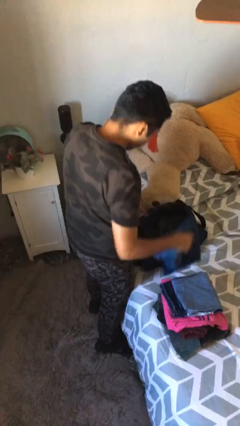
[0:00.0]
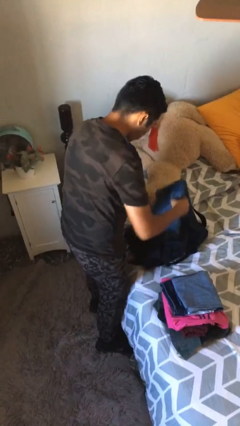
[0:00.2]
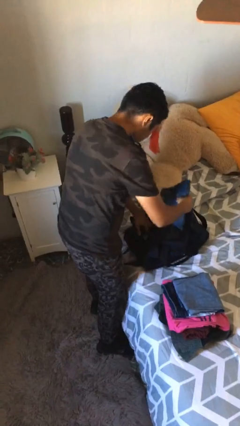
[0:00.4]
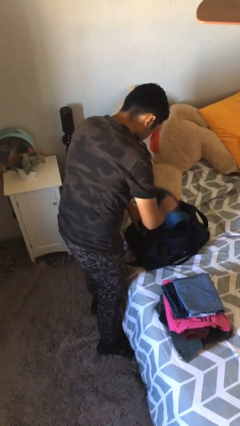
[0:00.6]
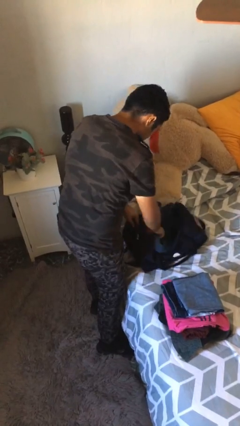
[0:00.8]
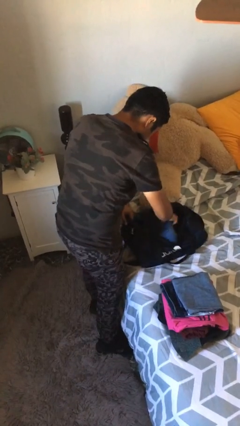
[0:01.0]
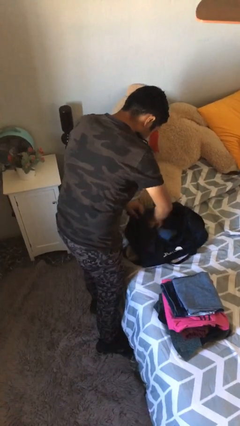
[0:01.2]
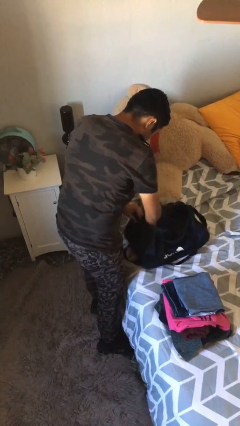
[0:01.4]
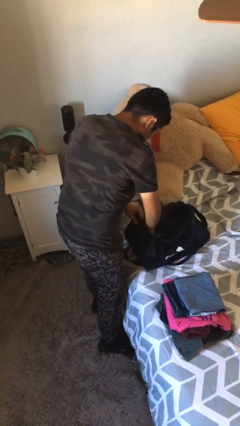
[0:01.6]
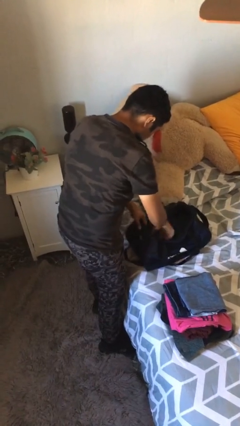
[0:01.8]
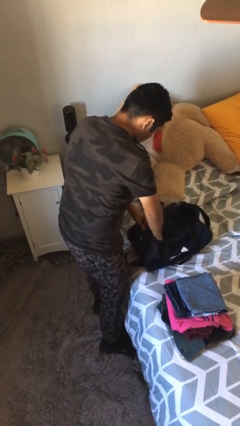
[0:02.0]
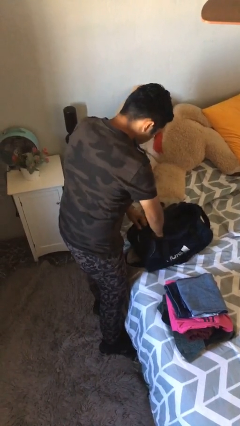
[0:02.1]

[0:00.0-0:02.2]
person loads clothes into suitcase

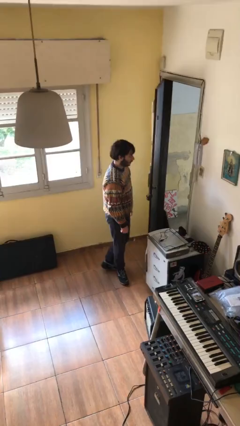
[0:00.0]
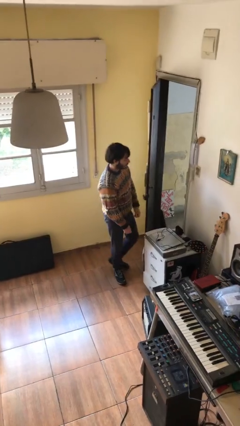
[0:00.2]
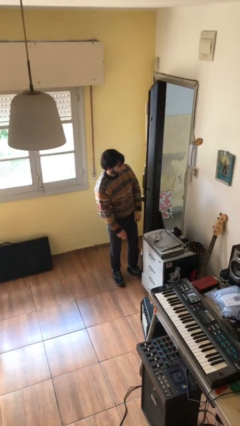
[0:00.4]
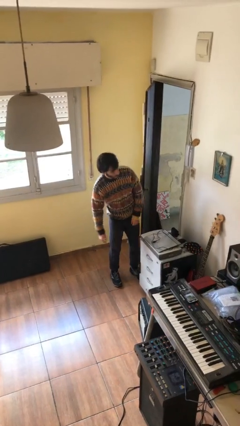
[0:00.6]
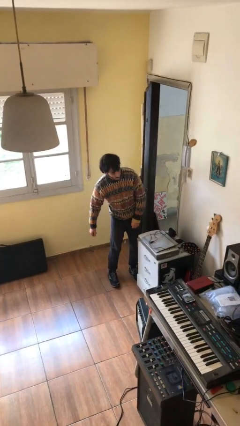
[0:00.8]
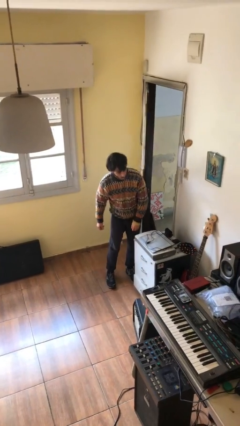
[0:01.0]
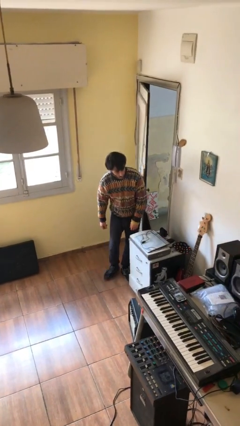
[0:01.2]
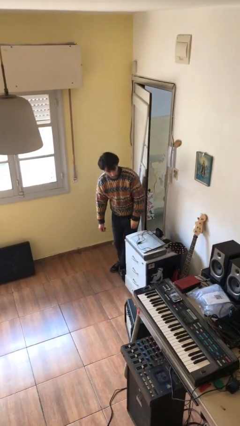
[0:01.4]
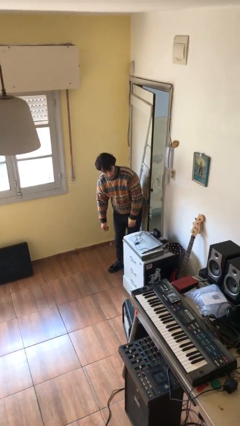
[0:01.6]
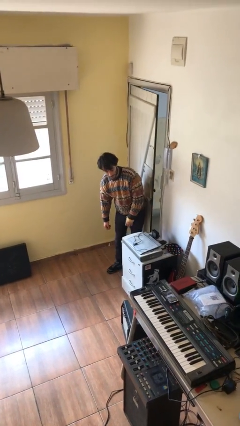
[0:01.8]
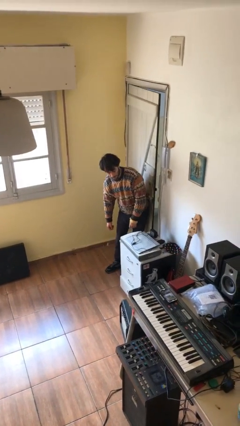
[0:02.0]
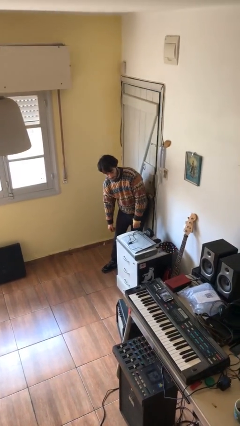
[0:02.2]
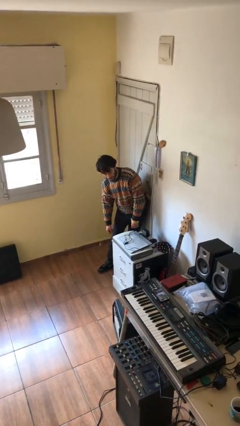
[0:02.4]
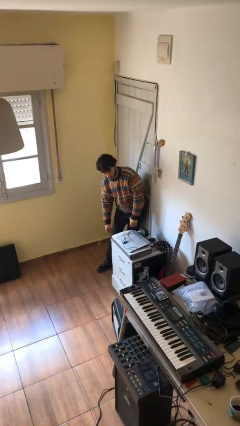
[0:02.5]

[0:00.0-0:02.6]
person closes door with hip

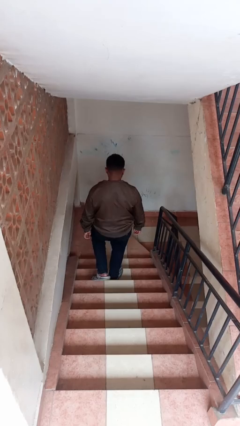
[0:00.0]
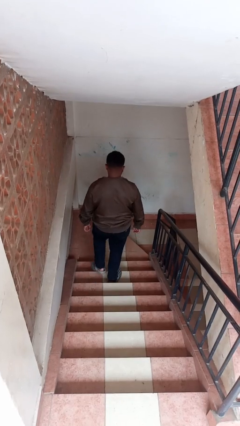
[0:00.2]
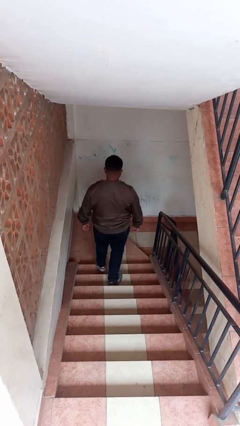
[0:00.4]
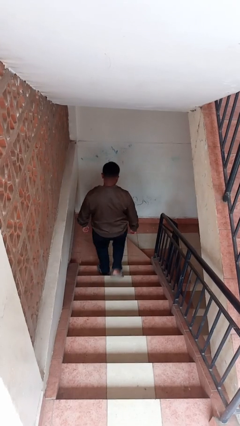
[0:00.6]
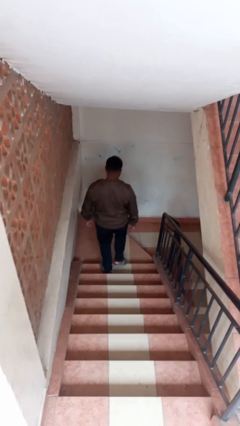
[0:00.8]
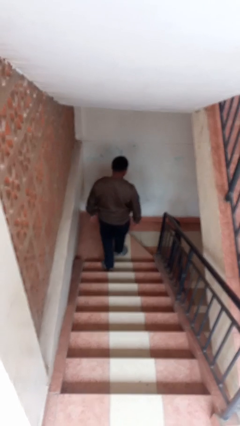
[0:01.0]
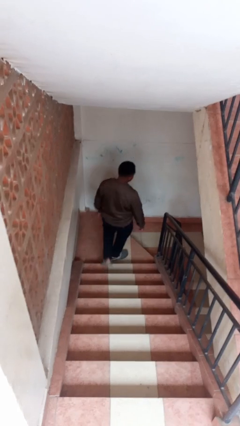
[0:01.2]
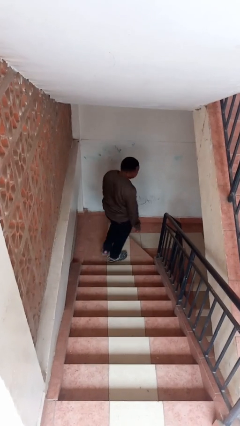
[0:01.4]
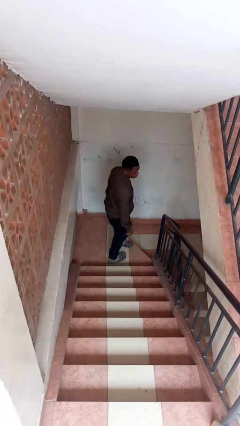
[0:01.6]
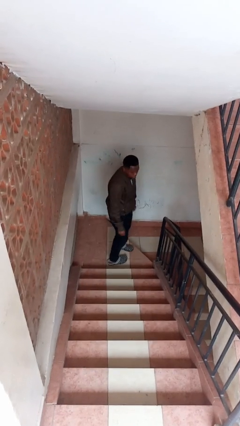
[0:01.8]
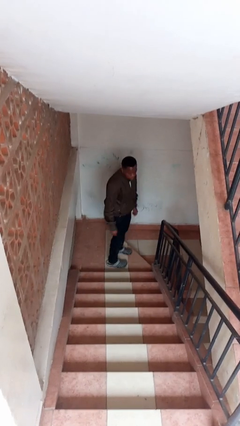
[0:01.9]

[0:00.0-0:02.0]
person climbs down stairs

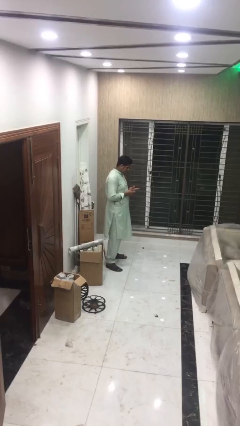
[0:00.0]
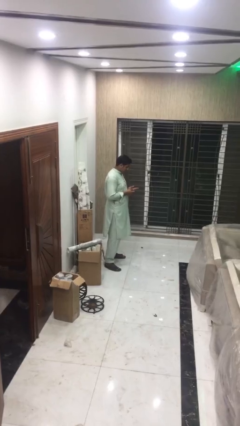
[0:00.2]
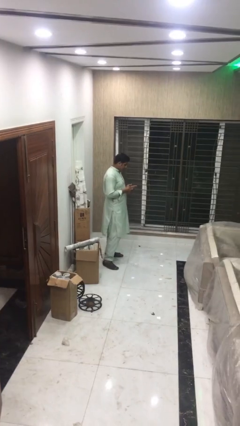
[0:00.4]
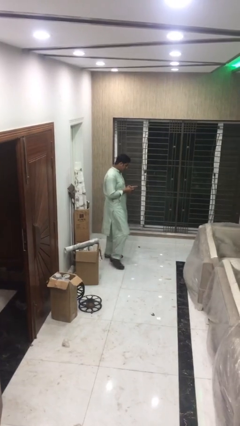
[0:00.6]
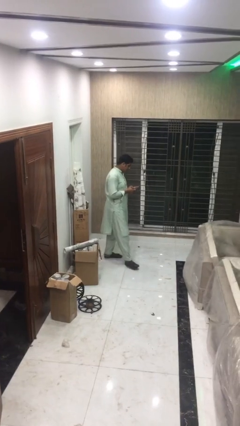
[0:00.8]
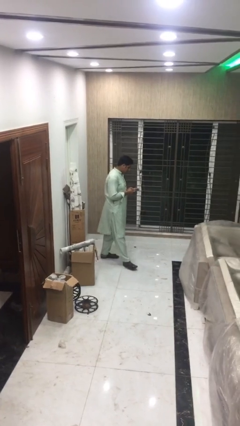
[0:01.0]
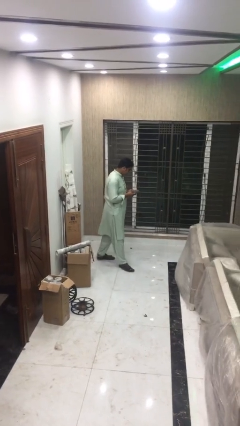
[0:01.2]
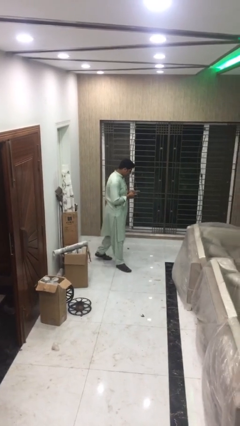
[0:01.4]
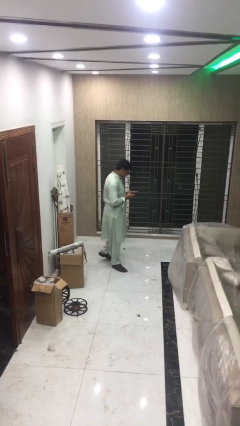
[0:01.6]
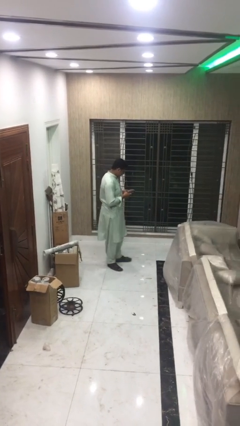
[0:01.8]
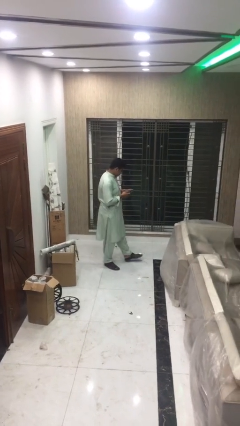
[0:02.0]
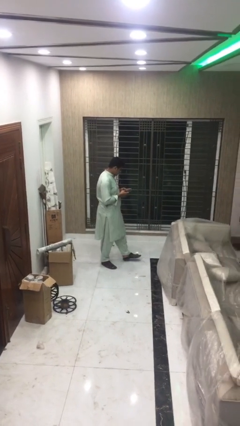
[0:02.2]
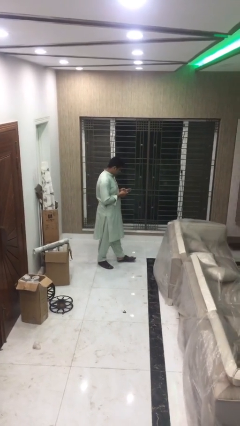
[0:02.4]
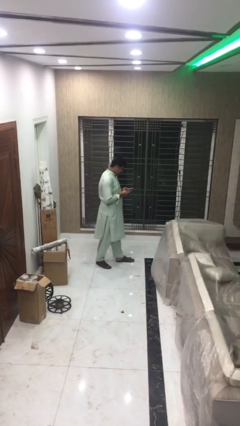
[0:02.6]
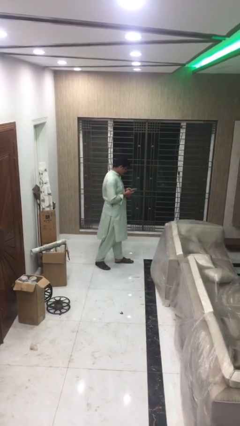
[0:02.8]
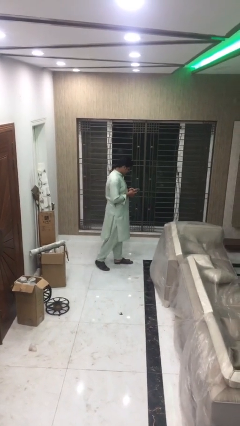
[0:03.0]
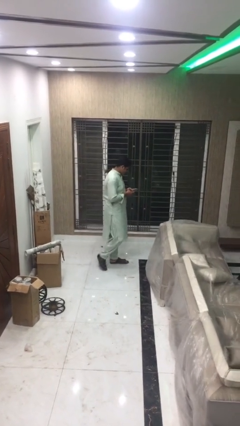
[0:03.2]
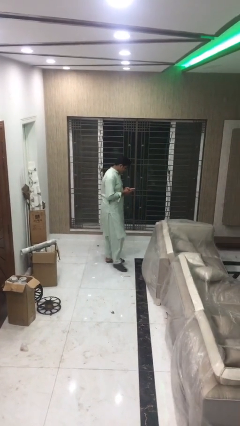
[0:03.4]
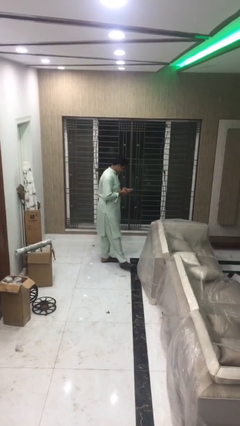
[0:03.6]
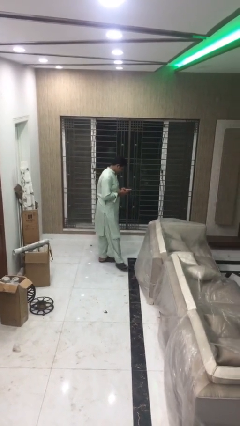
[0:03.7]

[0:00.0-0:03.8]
person texts on phone

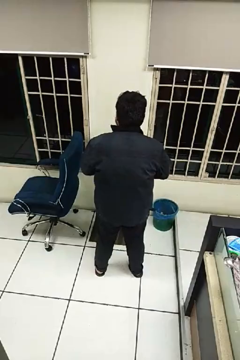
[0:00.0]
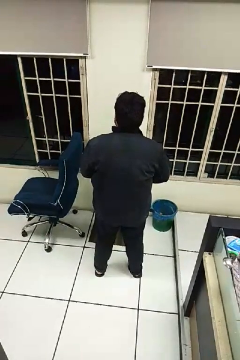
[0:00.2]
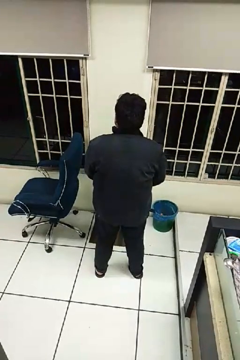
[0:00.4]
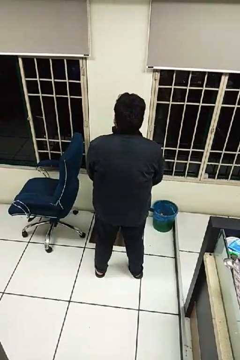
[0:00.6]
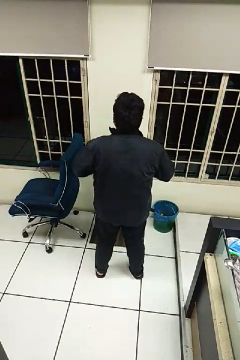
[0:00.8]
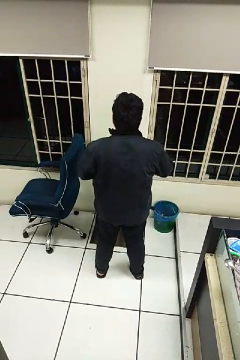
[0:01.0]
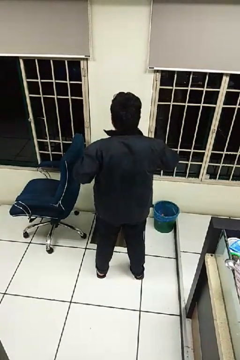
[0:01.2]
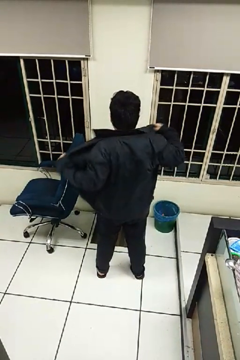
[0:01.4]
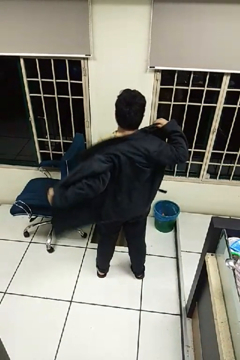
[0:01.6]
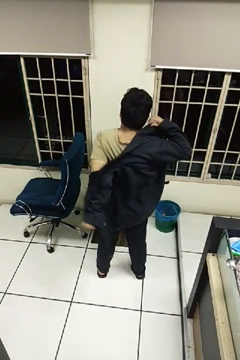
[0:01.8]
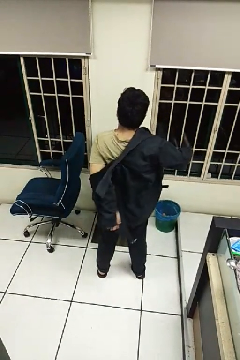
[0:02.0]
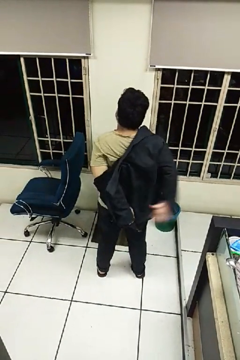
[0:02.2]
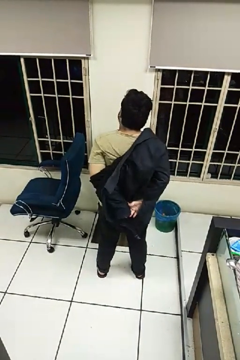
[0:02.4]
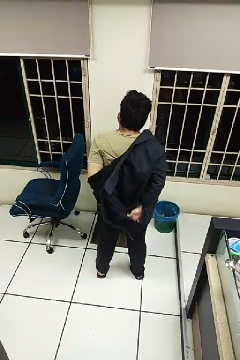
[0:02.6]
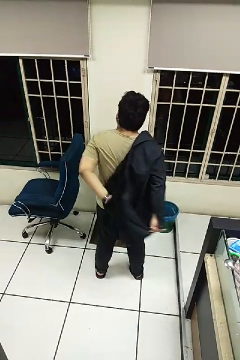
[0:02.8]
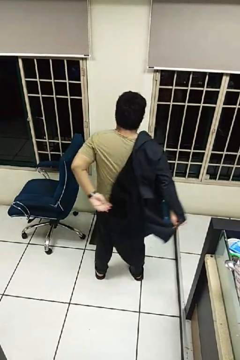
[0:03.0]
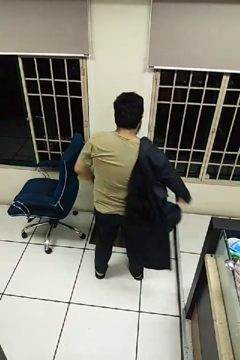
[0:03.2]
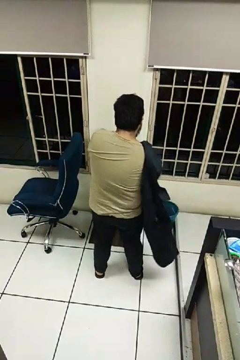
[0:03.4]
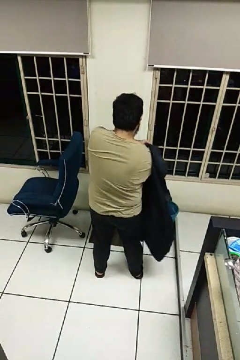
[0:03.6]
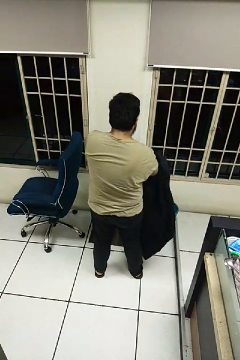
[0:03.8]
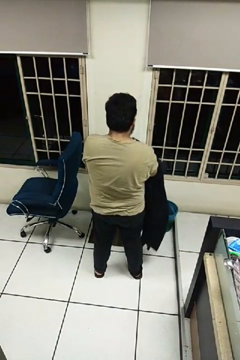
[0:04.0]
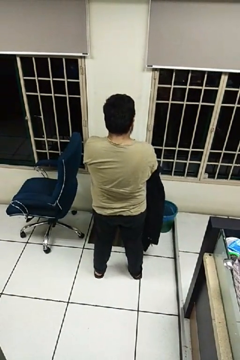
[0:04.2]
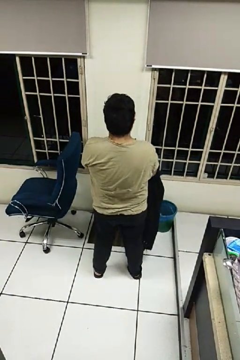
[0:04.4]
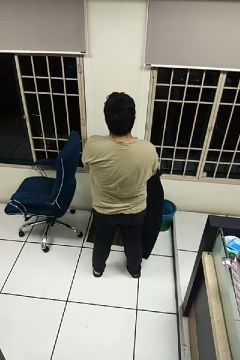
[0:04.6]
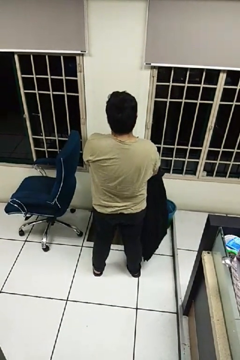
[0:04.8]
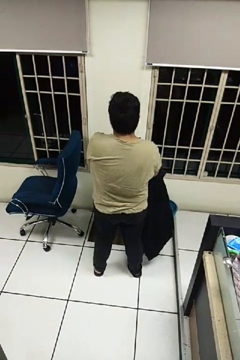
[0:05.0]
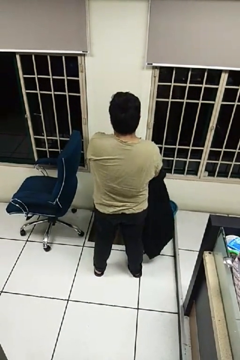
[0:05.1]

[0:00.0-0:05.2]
person takes off shirt

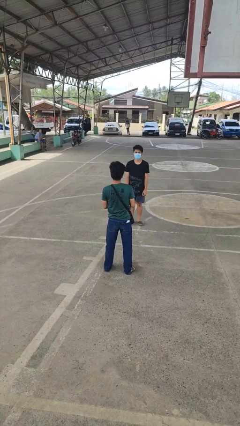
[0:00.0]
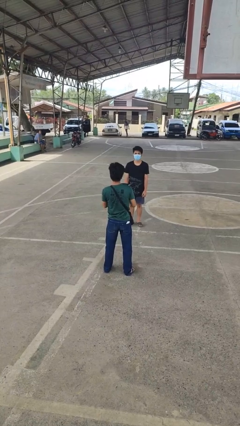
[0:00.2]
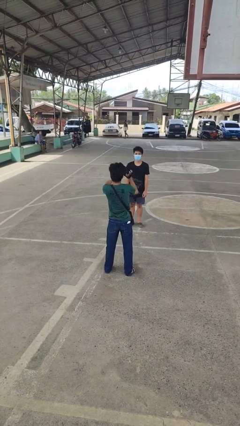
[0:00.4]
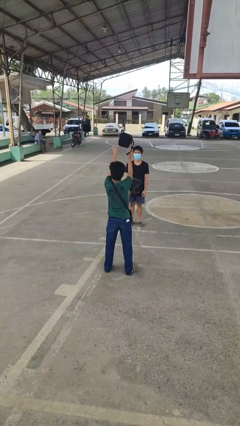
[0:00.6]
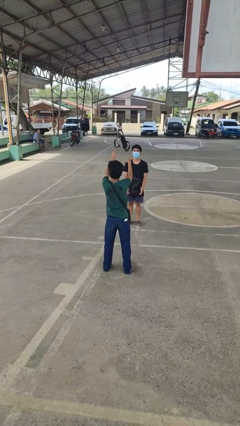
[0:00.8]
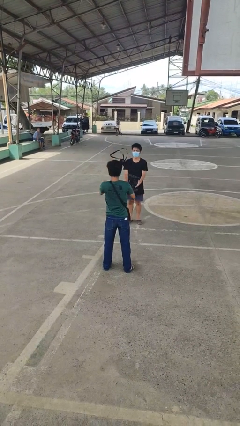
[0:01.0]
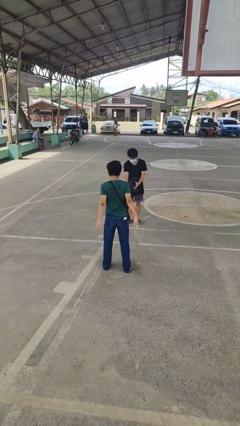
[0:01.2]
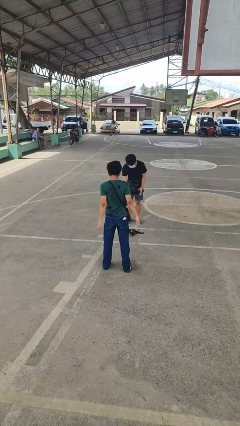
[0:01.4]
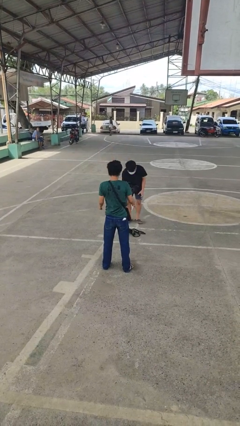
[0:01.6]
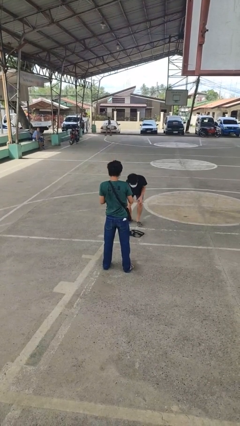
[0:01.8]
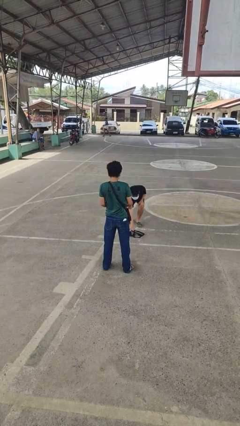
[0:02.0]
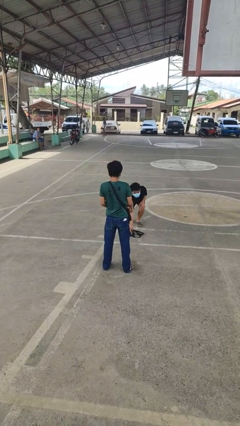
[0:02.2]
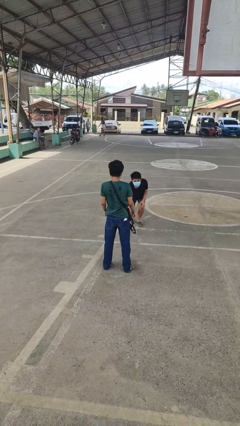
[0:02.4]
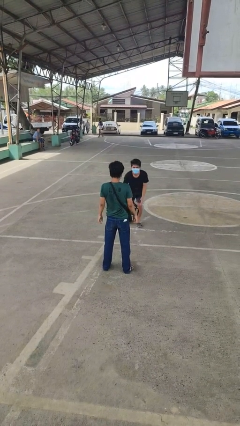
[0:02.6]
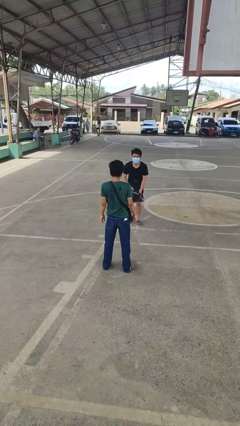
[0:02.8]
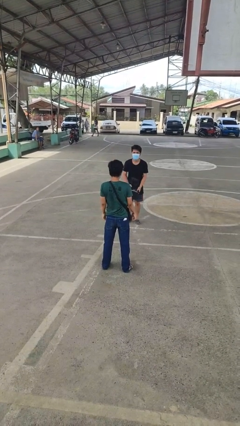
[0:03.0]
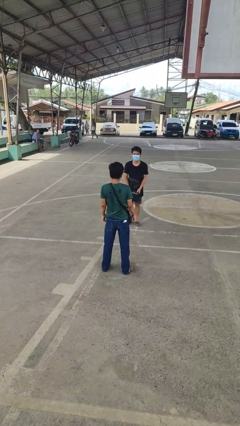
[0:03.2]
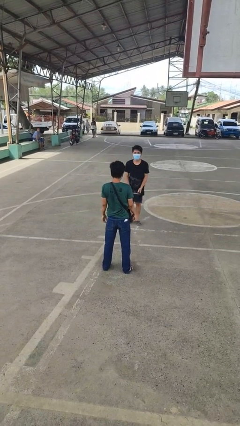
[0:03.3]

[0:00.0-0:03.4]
person throws object to person
